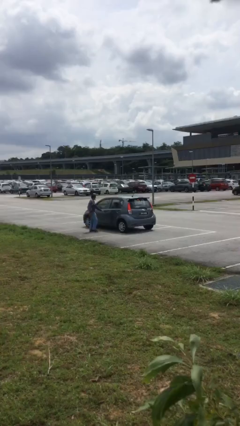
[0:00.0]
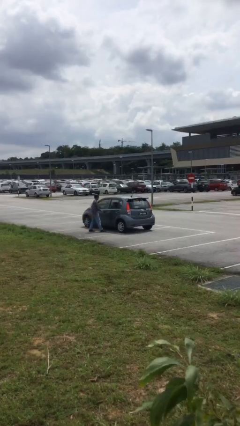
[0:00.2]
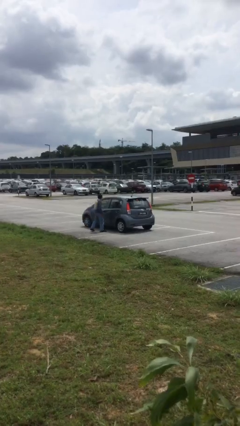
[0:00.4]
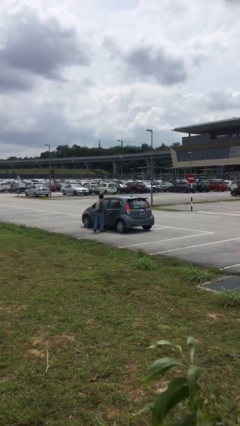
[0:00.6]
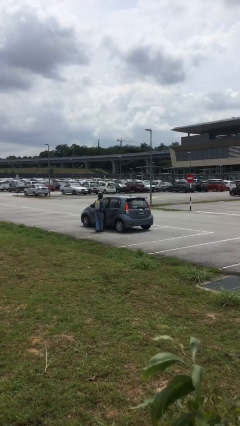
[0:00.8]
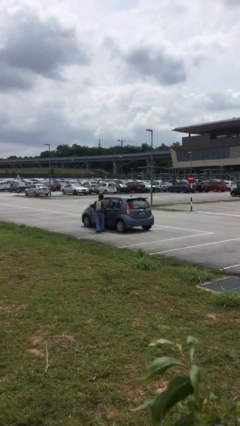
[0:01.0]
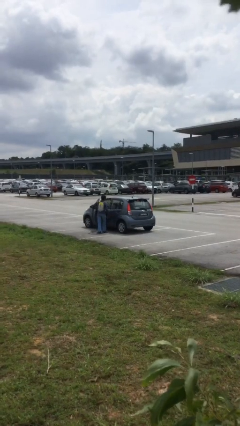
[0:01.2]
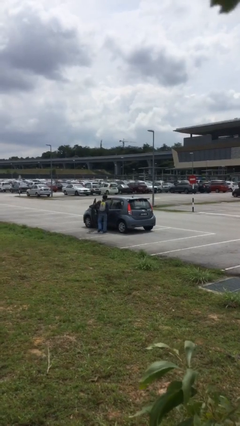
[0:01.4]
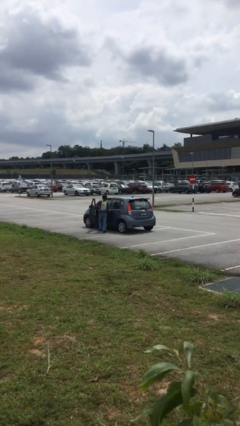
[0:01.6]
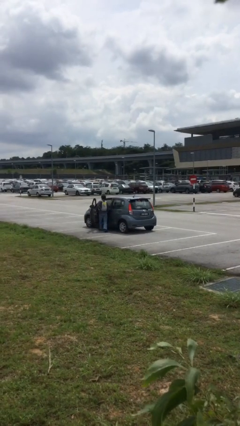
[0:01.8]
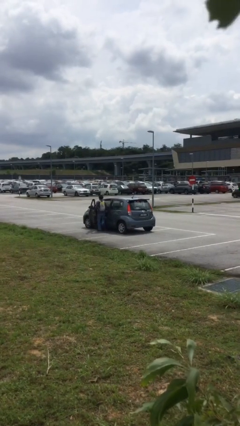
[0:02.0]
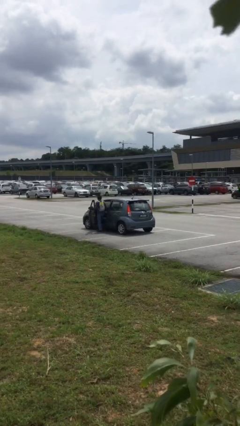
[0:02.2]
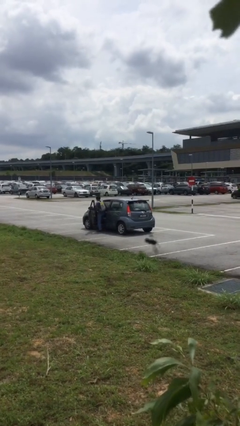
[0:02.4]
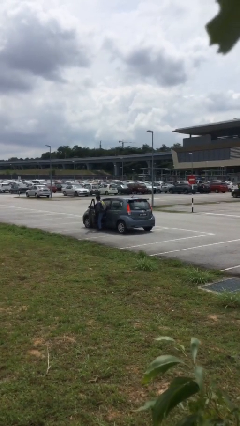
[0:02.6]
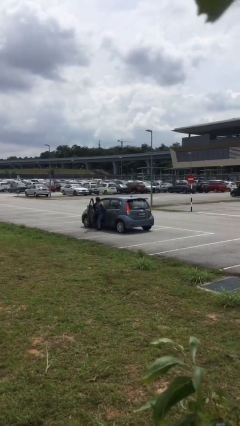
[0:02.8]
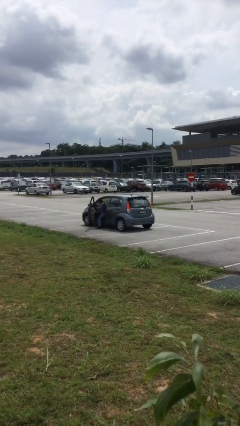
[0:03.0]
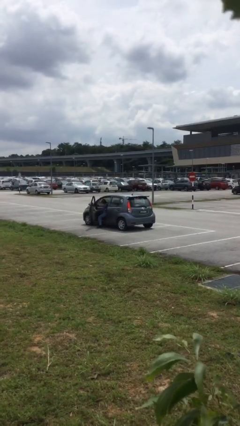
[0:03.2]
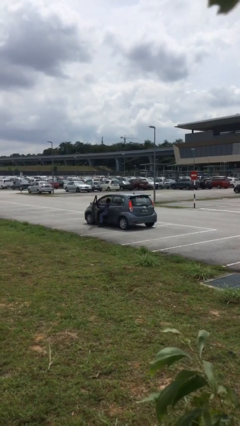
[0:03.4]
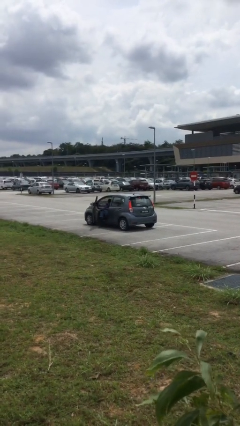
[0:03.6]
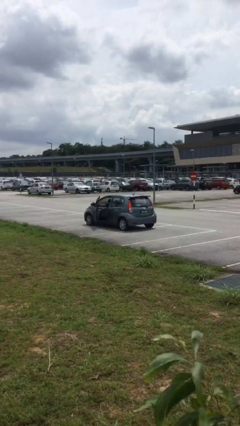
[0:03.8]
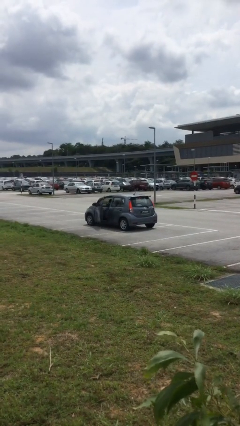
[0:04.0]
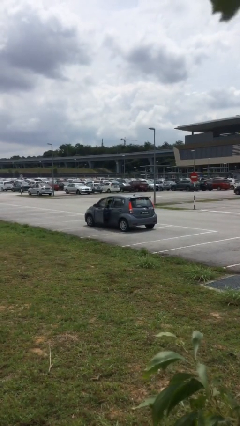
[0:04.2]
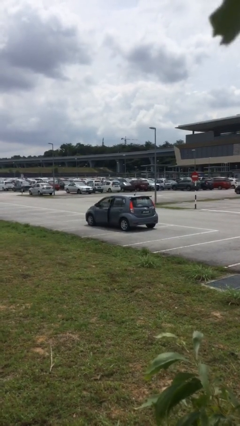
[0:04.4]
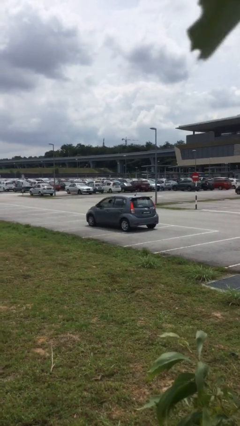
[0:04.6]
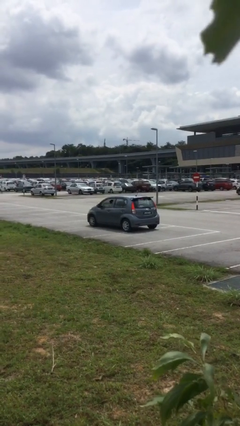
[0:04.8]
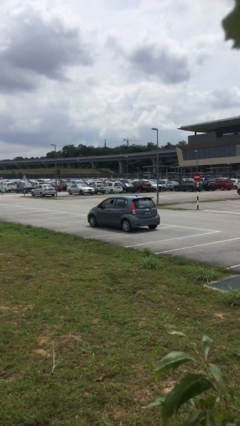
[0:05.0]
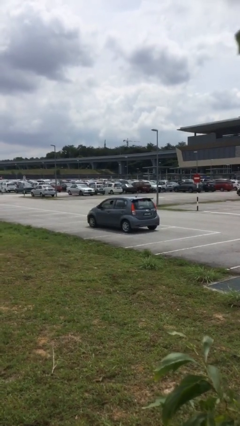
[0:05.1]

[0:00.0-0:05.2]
car picks up person

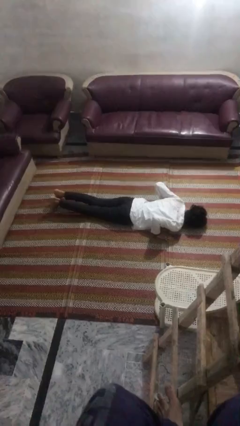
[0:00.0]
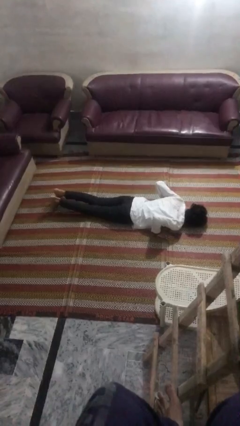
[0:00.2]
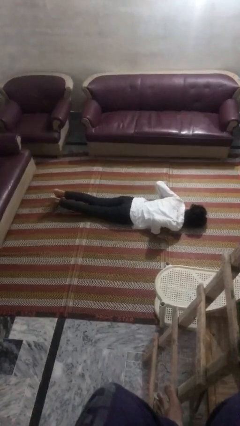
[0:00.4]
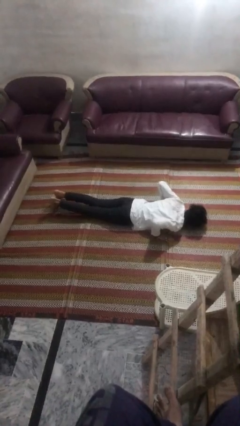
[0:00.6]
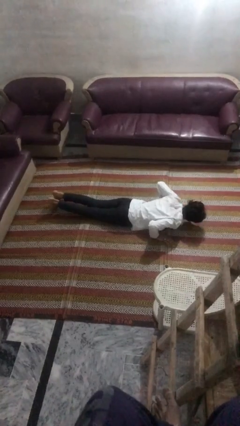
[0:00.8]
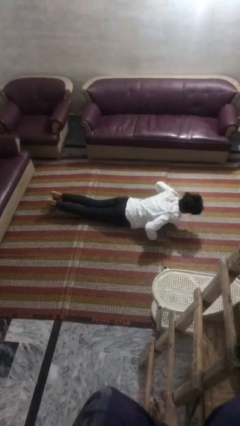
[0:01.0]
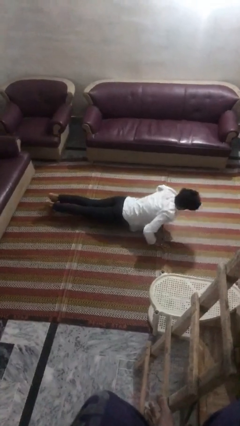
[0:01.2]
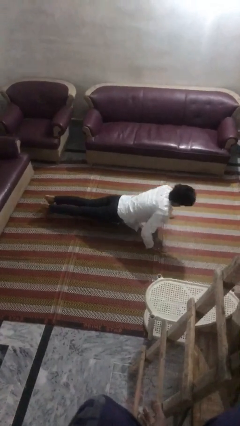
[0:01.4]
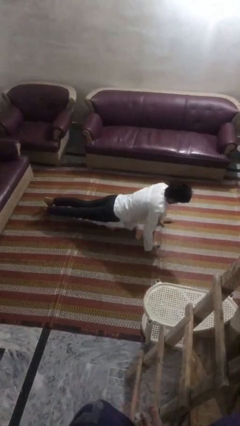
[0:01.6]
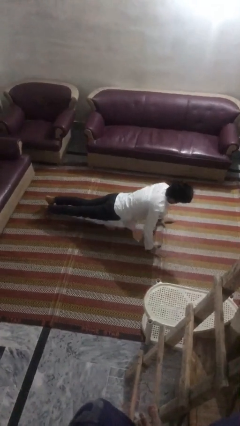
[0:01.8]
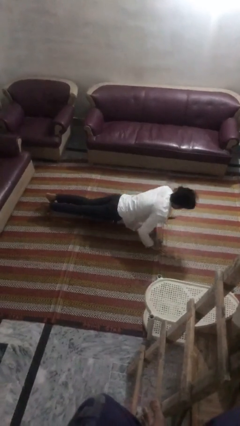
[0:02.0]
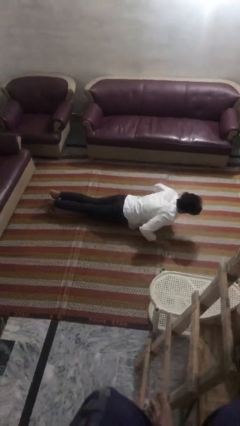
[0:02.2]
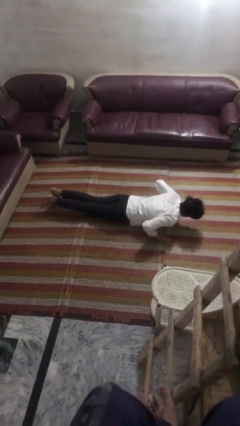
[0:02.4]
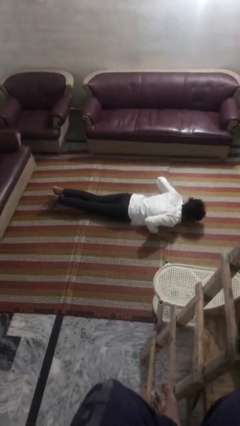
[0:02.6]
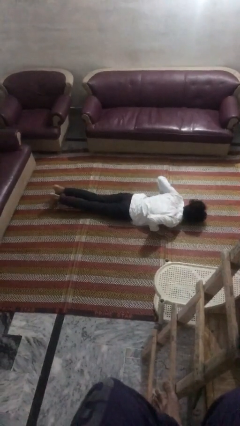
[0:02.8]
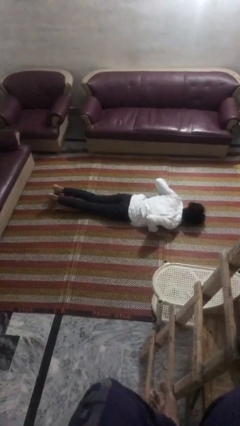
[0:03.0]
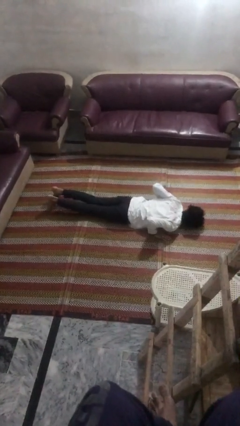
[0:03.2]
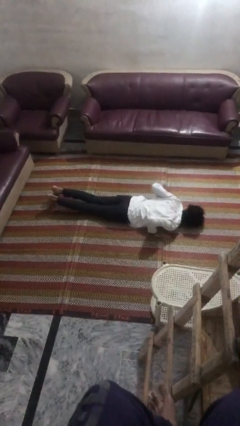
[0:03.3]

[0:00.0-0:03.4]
person exercises with pushup

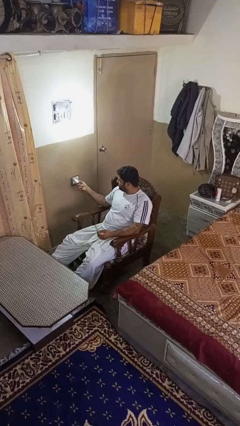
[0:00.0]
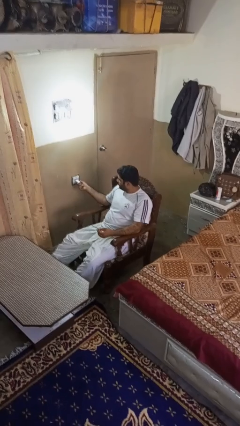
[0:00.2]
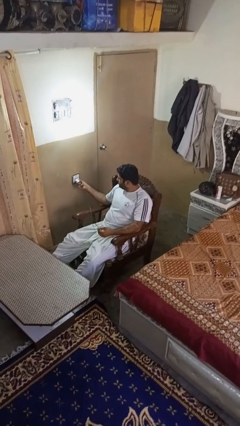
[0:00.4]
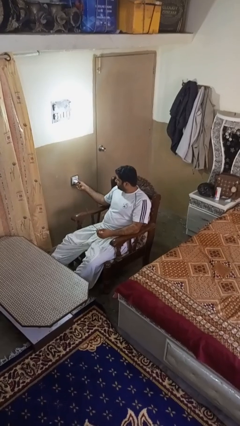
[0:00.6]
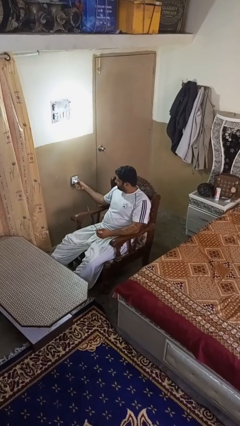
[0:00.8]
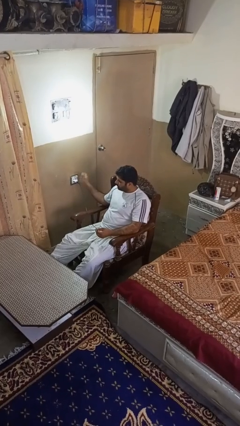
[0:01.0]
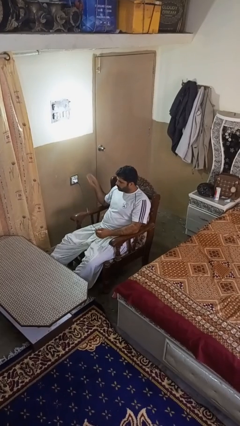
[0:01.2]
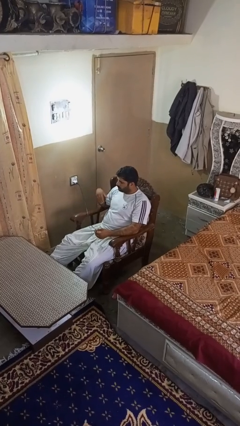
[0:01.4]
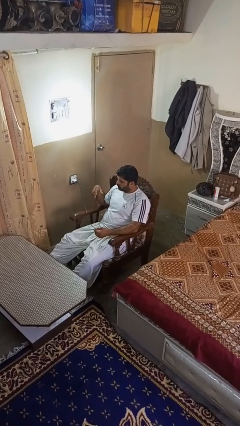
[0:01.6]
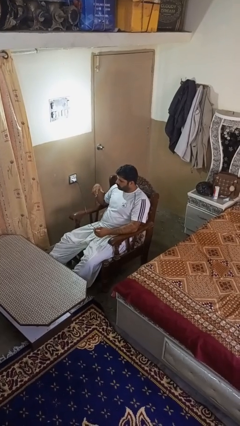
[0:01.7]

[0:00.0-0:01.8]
person plugs into electrical socket

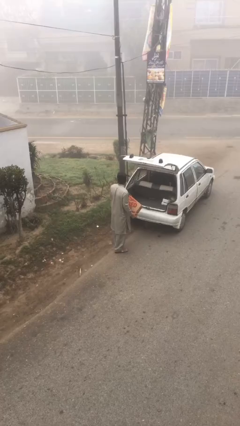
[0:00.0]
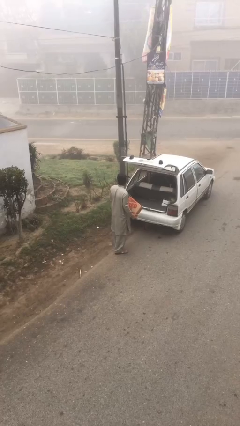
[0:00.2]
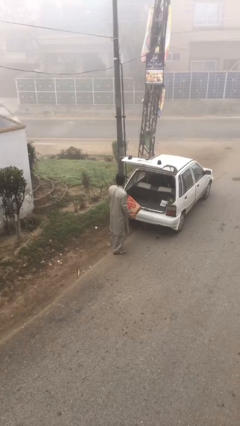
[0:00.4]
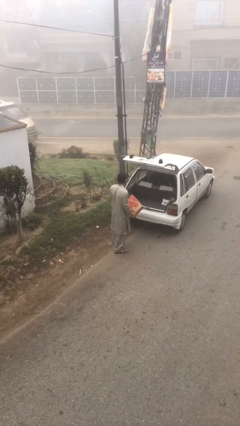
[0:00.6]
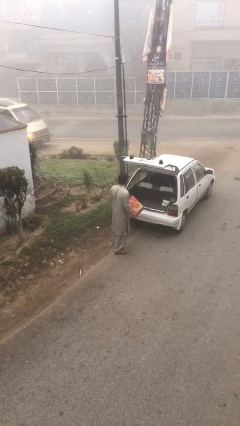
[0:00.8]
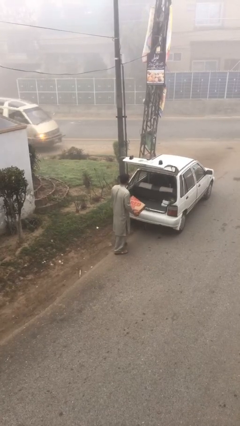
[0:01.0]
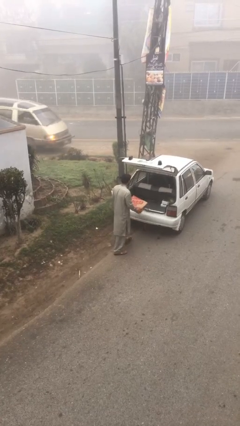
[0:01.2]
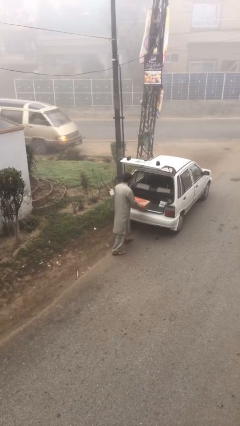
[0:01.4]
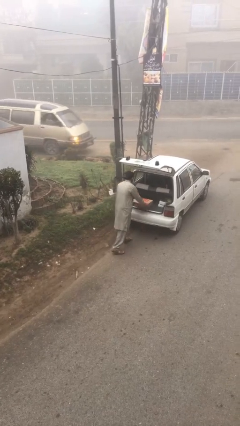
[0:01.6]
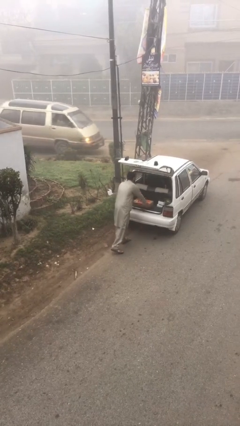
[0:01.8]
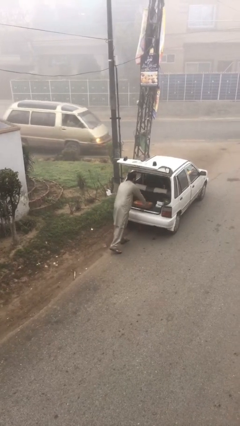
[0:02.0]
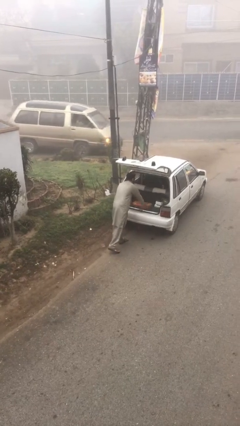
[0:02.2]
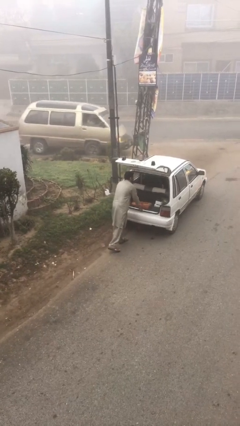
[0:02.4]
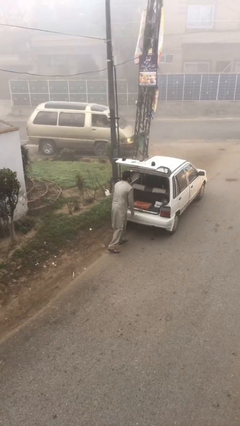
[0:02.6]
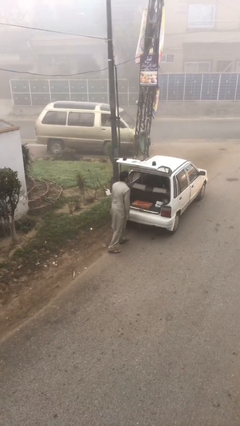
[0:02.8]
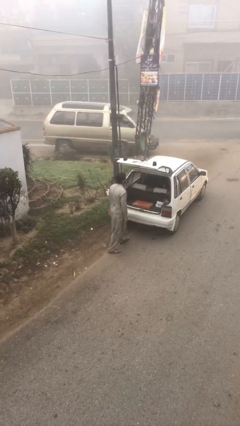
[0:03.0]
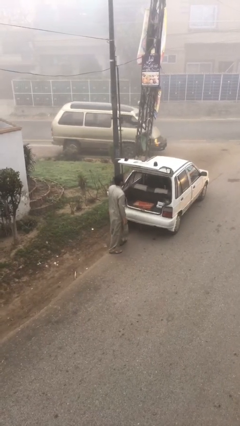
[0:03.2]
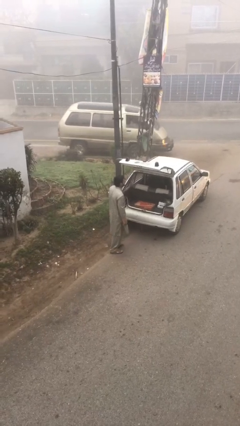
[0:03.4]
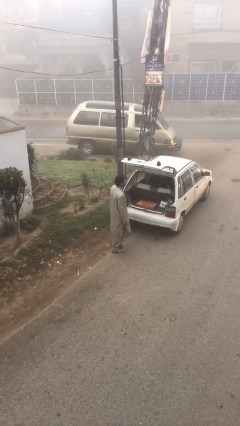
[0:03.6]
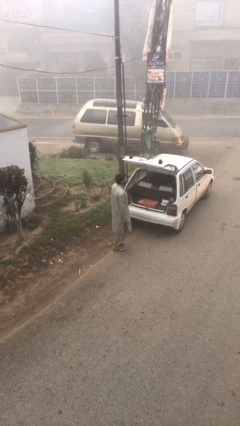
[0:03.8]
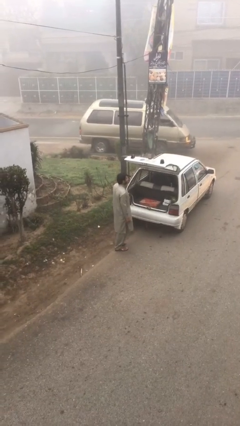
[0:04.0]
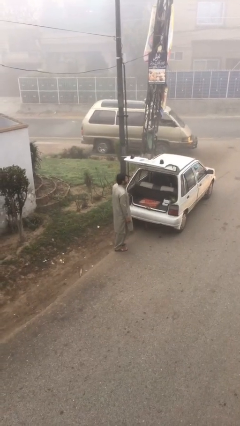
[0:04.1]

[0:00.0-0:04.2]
person loads car

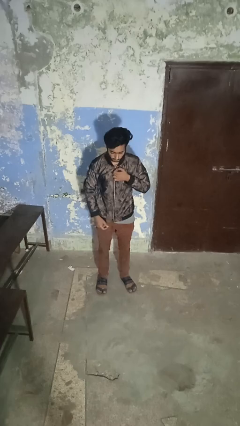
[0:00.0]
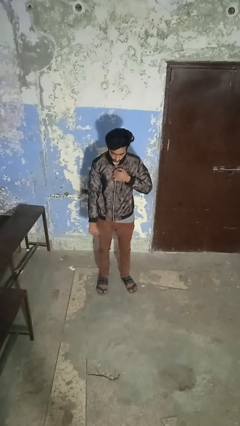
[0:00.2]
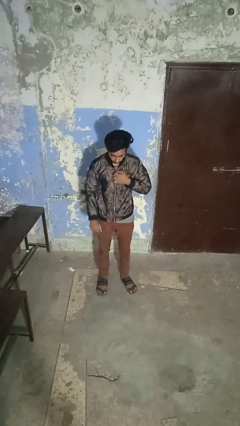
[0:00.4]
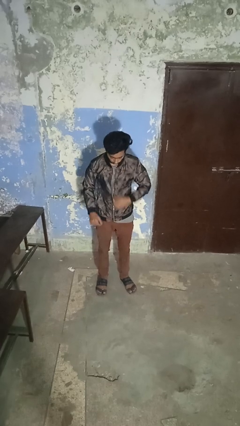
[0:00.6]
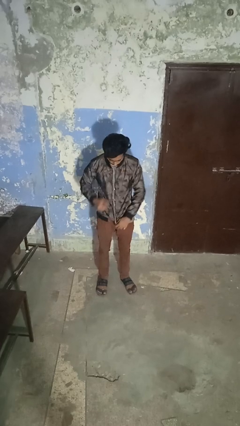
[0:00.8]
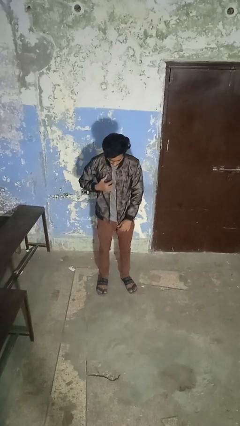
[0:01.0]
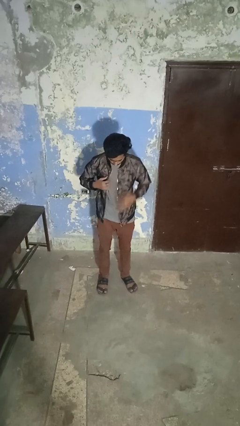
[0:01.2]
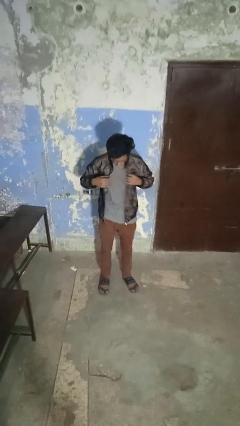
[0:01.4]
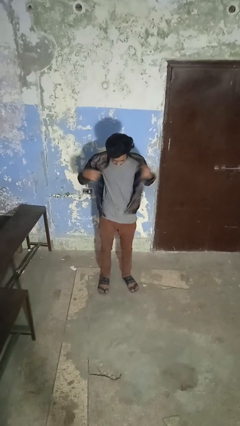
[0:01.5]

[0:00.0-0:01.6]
person unzips jacket

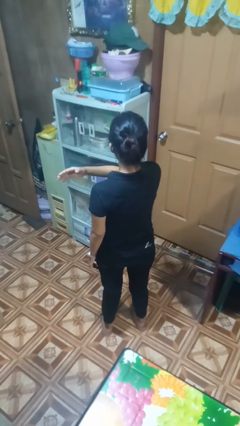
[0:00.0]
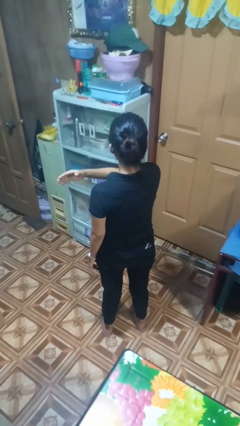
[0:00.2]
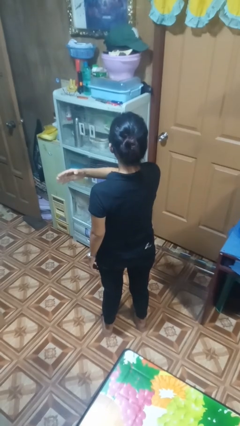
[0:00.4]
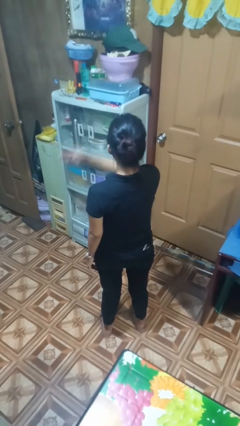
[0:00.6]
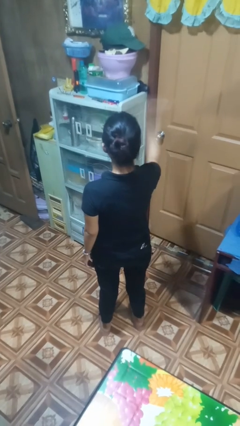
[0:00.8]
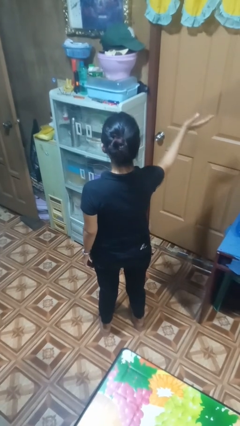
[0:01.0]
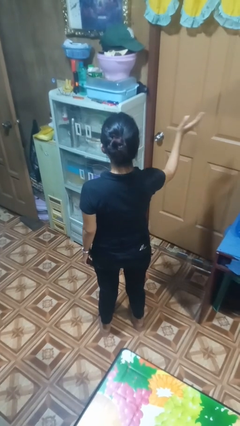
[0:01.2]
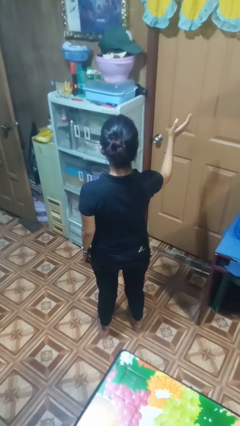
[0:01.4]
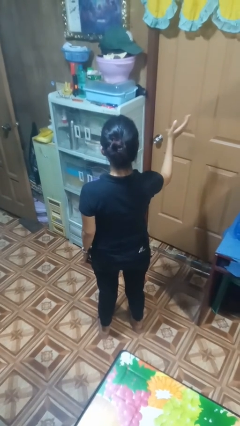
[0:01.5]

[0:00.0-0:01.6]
person gestures swipe right
